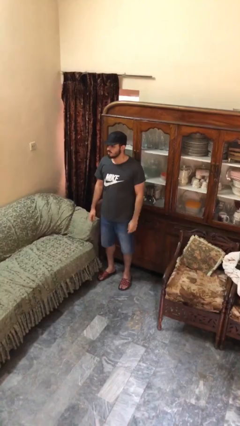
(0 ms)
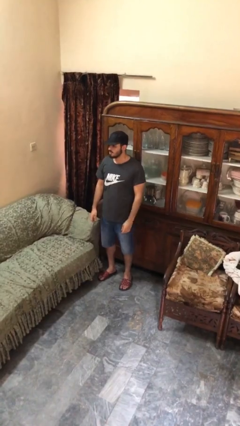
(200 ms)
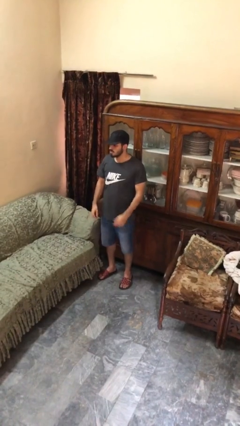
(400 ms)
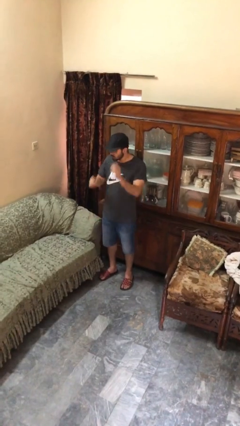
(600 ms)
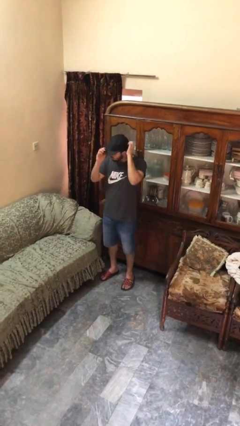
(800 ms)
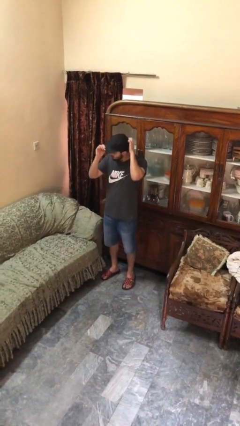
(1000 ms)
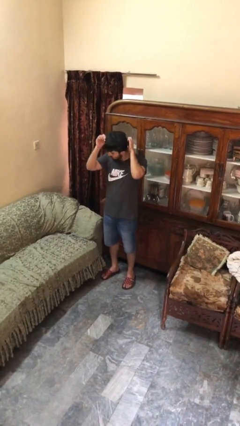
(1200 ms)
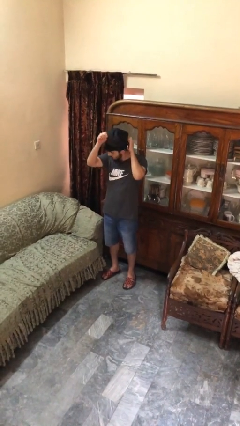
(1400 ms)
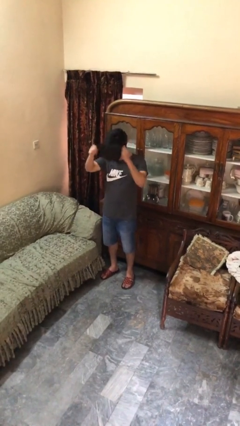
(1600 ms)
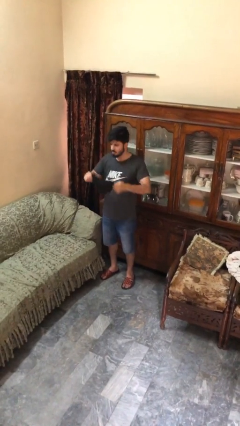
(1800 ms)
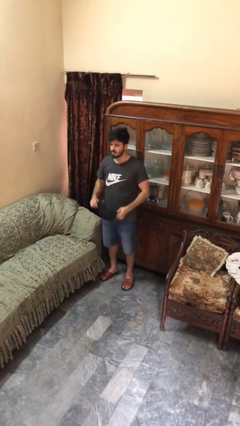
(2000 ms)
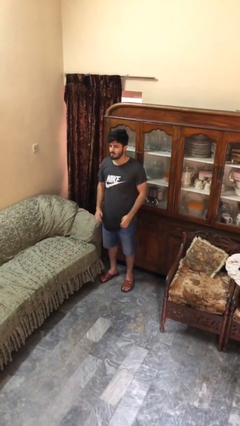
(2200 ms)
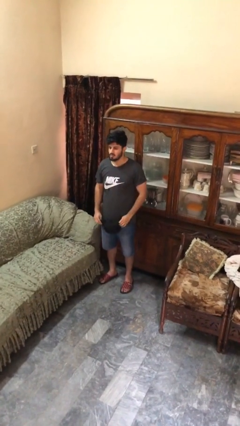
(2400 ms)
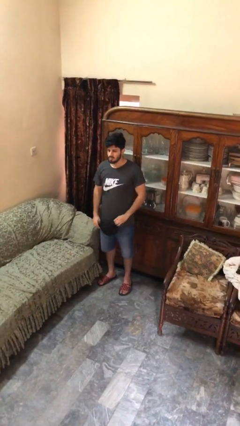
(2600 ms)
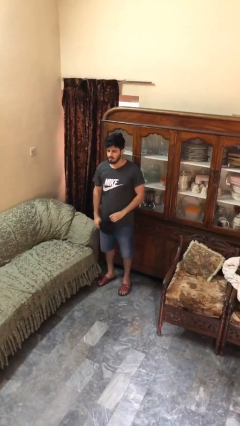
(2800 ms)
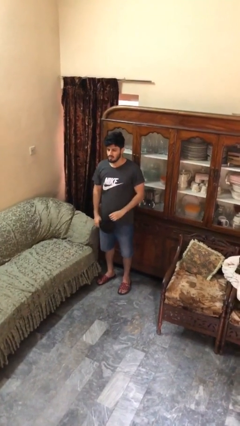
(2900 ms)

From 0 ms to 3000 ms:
person takes off hat

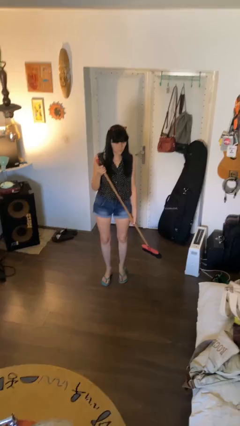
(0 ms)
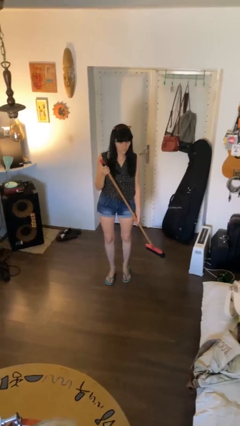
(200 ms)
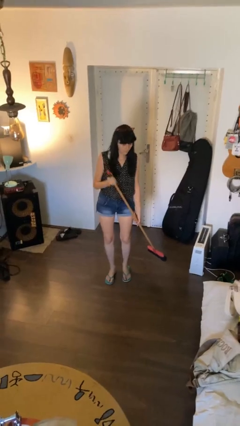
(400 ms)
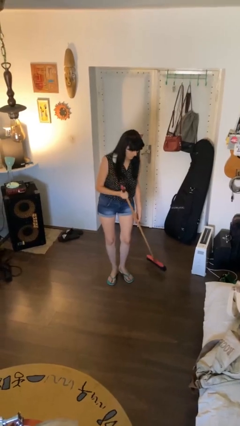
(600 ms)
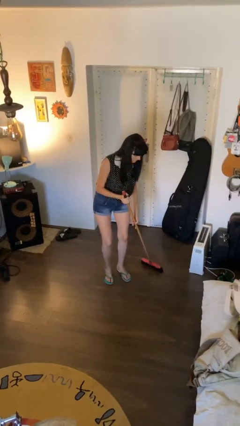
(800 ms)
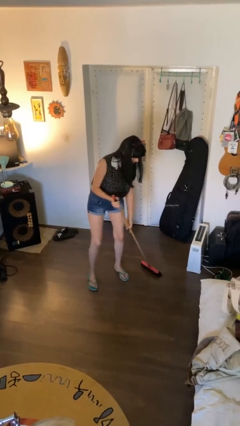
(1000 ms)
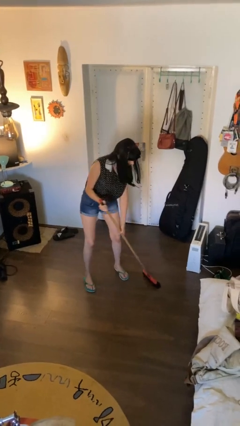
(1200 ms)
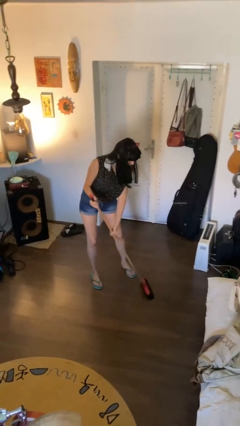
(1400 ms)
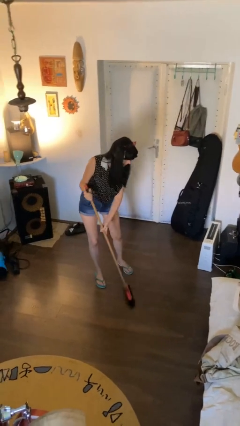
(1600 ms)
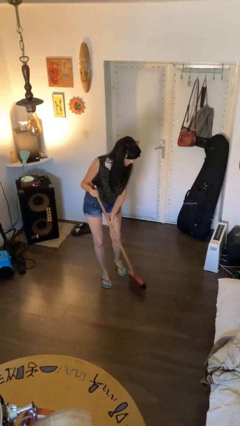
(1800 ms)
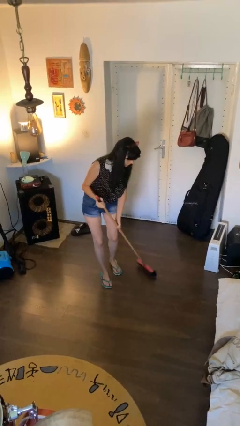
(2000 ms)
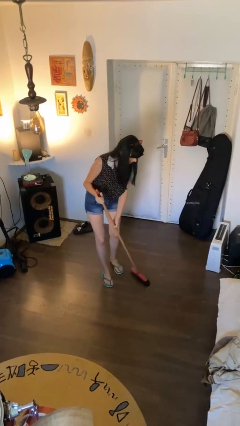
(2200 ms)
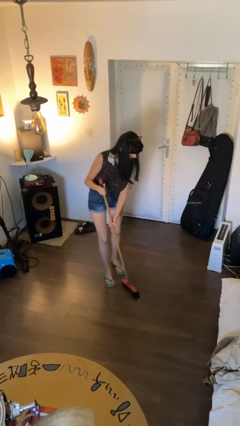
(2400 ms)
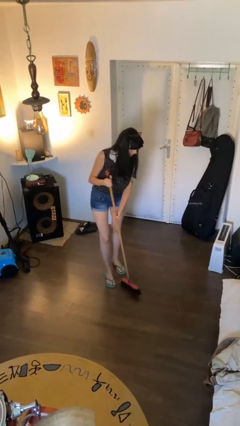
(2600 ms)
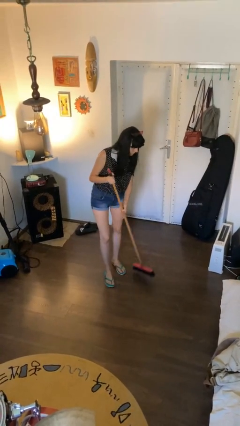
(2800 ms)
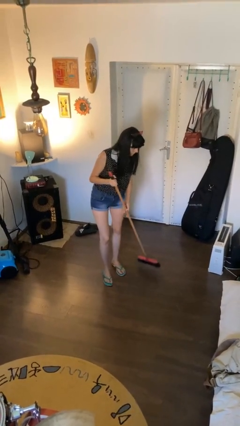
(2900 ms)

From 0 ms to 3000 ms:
person sweeps floor

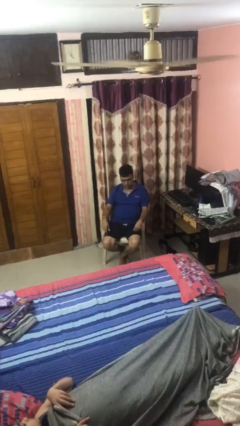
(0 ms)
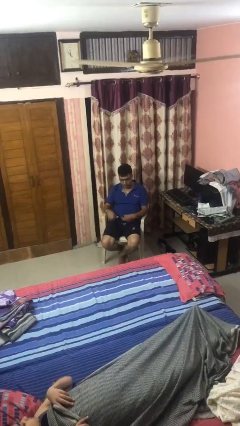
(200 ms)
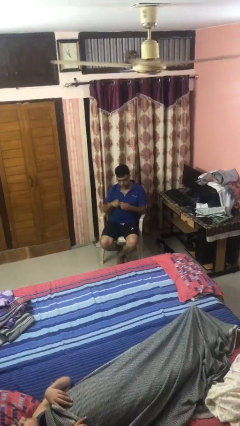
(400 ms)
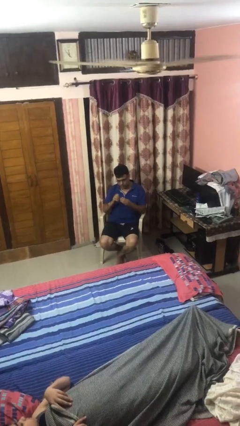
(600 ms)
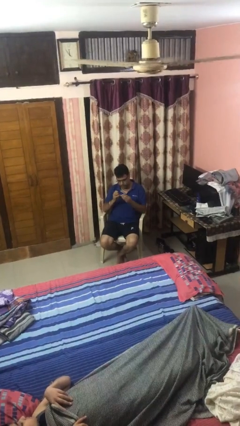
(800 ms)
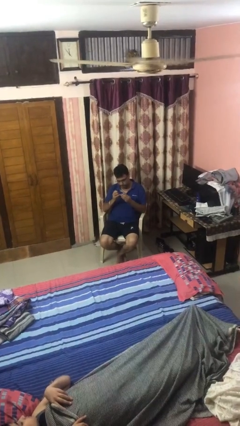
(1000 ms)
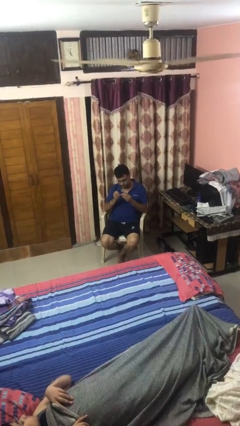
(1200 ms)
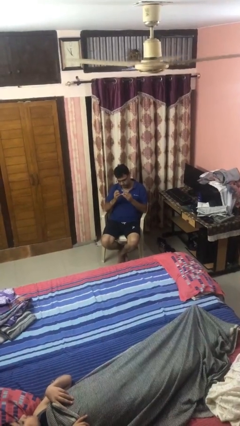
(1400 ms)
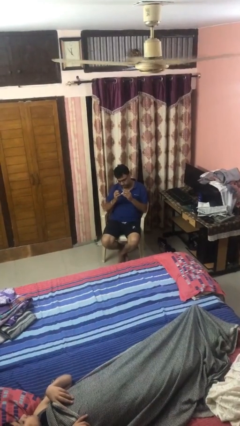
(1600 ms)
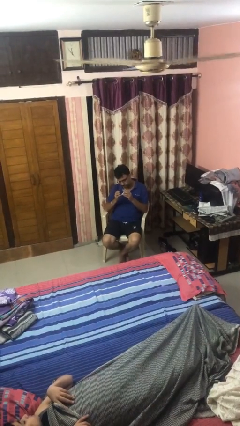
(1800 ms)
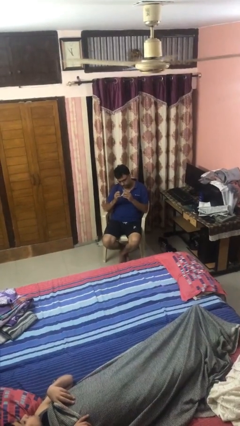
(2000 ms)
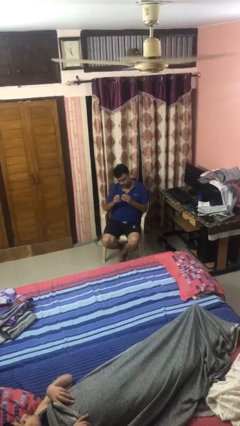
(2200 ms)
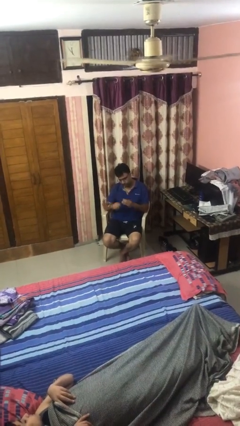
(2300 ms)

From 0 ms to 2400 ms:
person clips fingernails

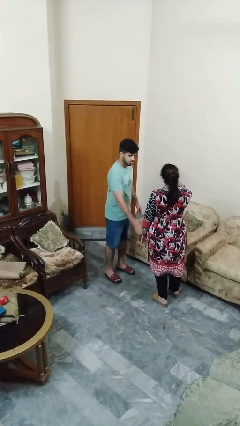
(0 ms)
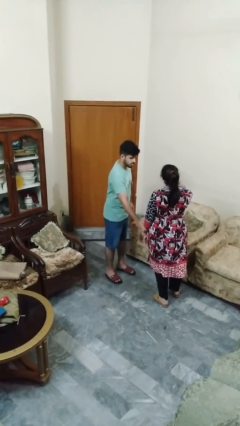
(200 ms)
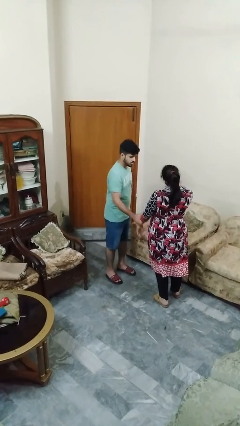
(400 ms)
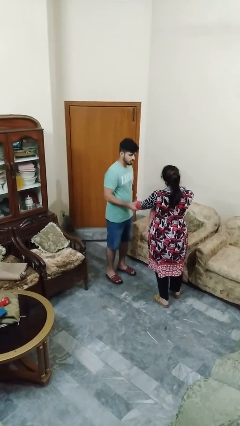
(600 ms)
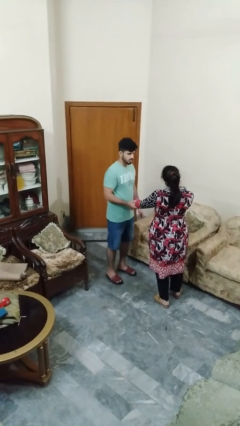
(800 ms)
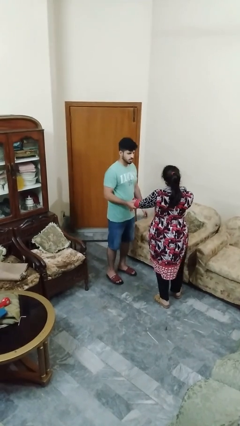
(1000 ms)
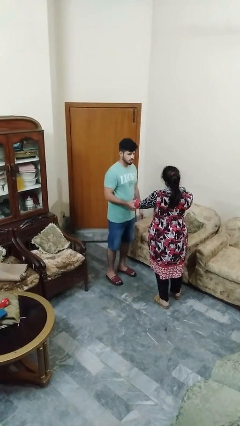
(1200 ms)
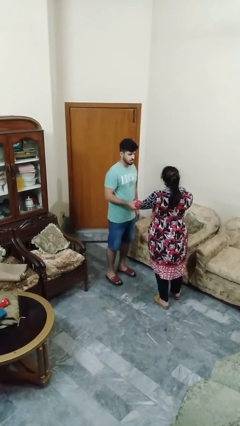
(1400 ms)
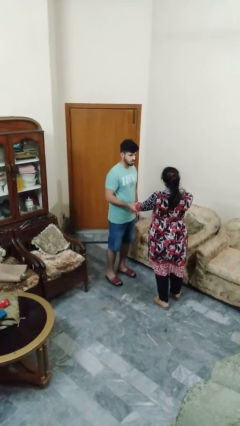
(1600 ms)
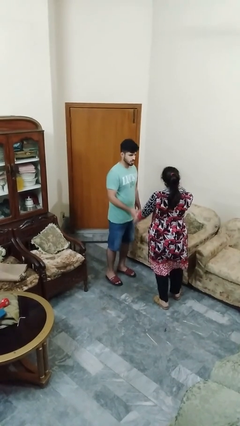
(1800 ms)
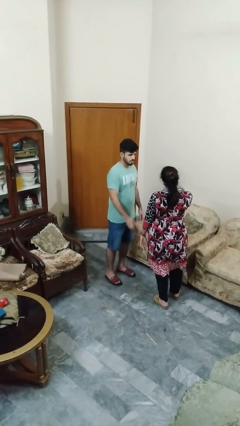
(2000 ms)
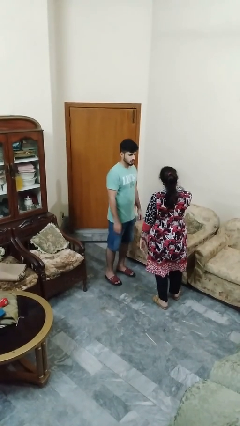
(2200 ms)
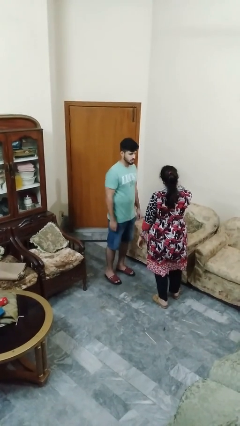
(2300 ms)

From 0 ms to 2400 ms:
person grabs person by forearm

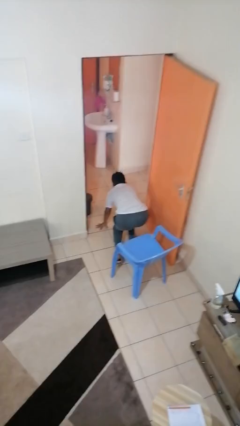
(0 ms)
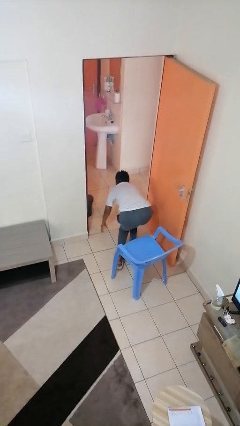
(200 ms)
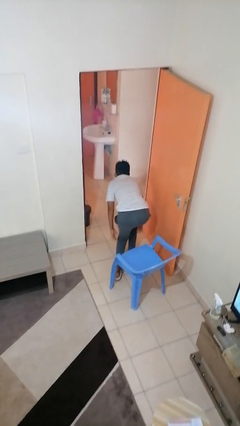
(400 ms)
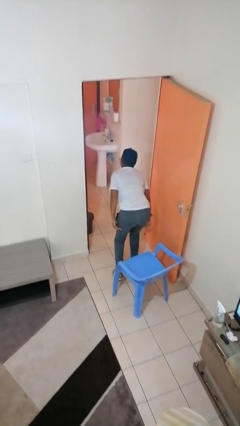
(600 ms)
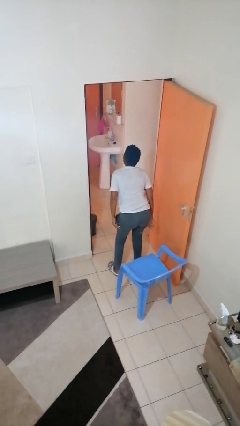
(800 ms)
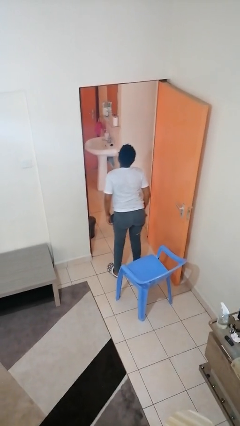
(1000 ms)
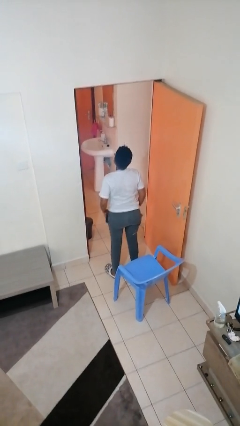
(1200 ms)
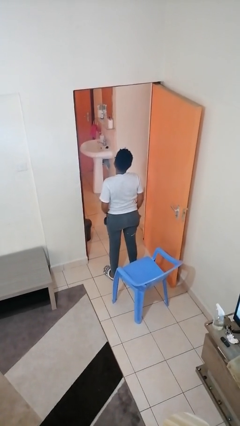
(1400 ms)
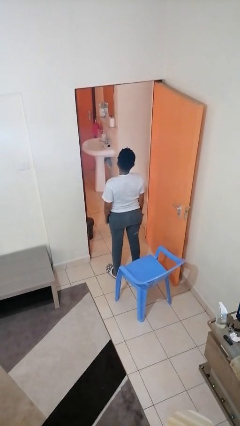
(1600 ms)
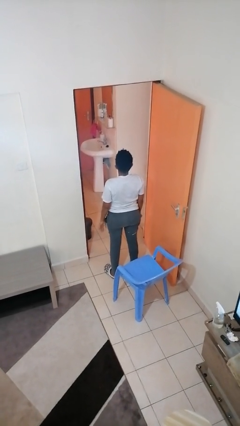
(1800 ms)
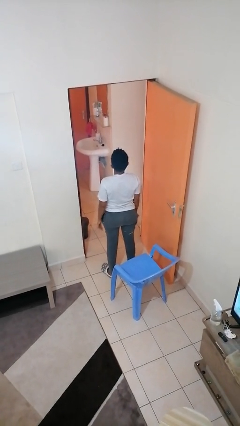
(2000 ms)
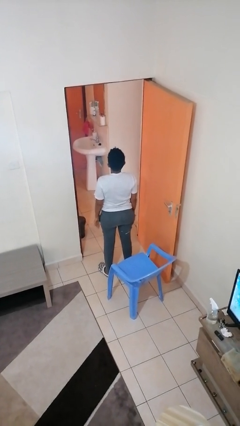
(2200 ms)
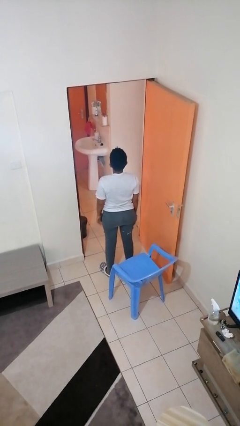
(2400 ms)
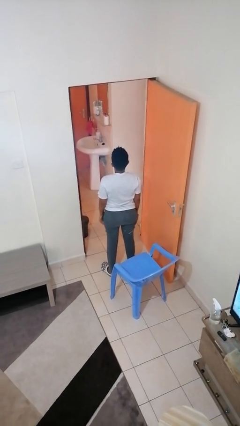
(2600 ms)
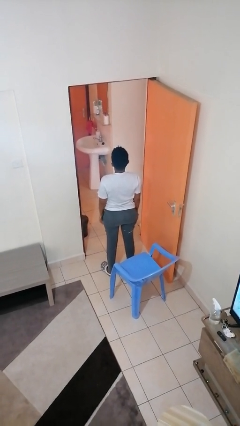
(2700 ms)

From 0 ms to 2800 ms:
person stands up from floor

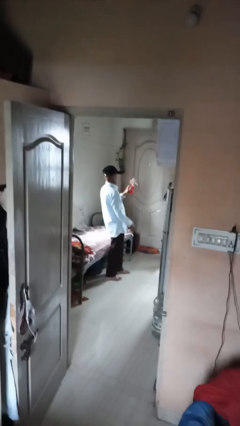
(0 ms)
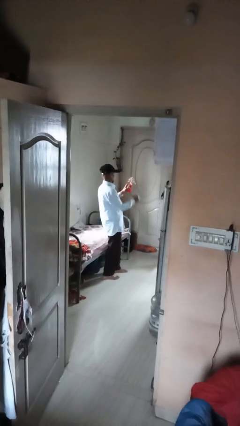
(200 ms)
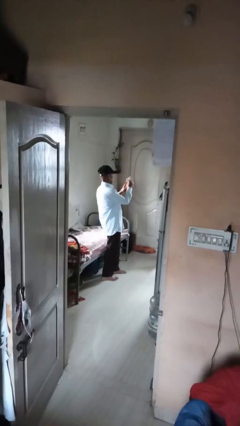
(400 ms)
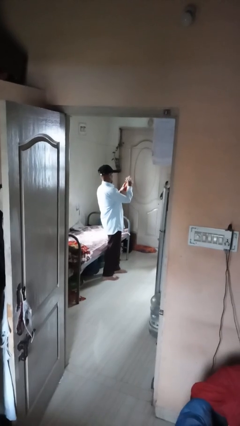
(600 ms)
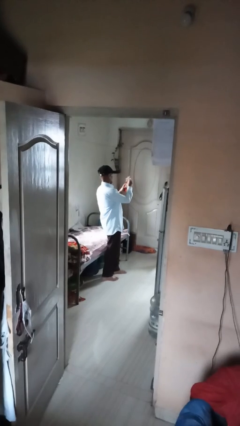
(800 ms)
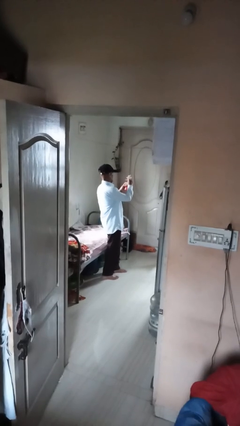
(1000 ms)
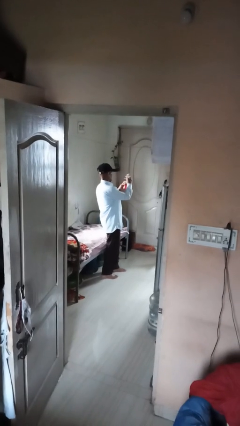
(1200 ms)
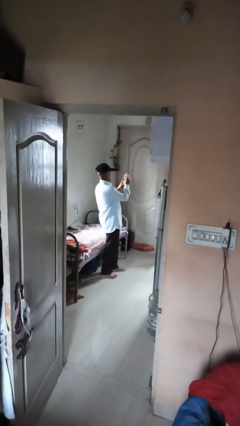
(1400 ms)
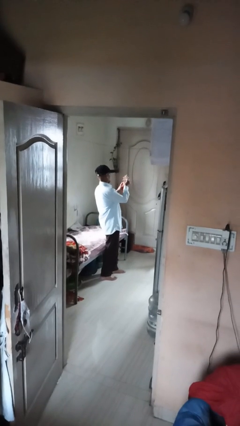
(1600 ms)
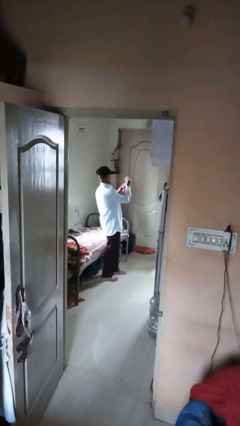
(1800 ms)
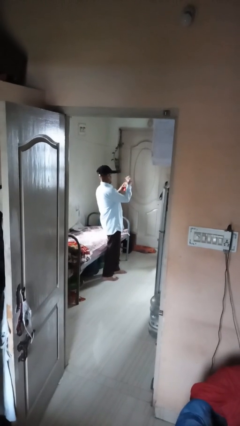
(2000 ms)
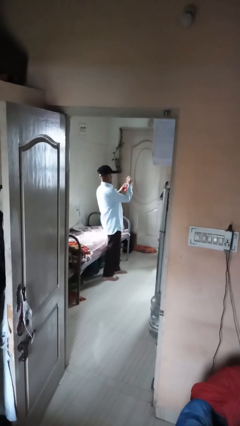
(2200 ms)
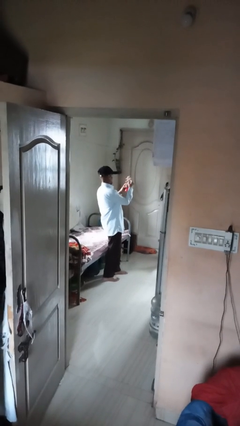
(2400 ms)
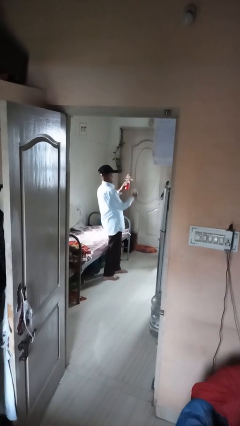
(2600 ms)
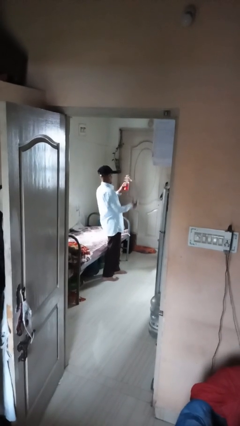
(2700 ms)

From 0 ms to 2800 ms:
person arranges flowers in vase

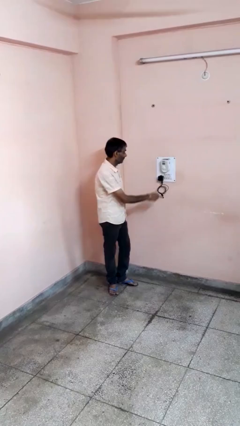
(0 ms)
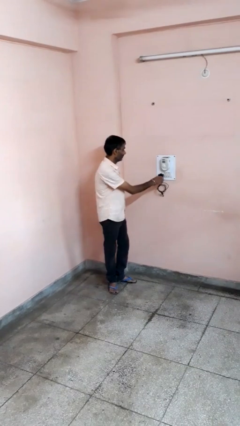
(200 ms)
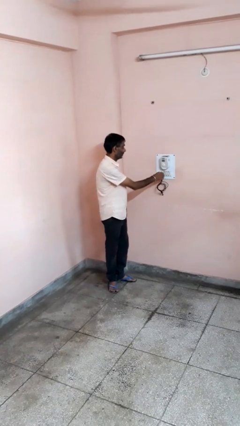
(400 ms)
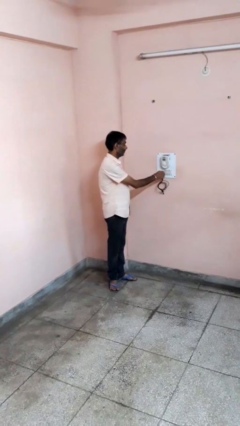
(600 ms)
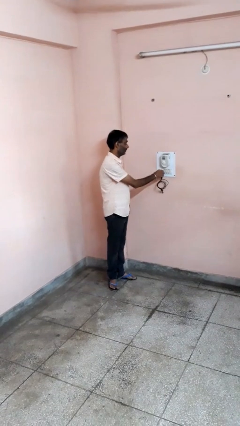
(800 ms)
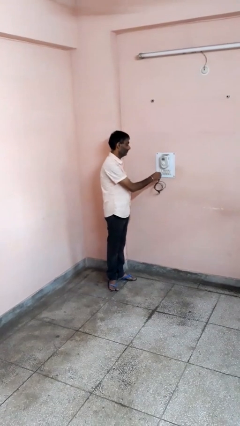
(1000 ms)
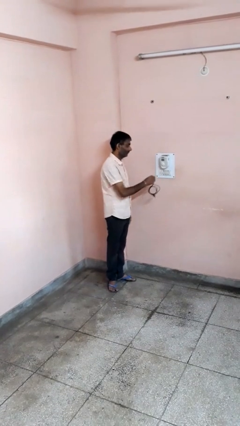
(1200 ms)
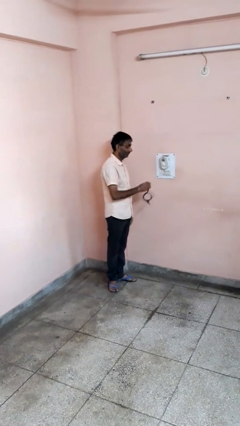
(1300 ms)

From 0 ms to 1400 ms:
person unplugs from electrical socket
